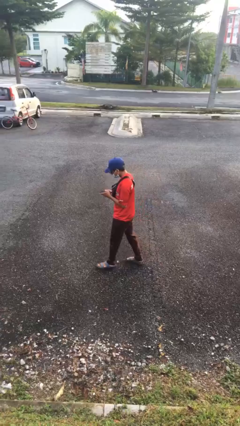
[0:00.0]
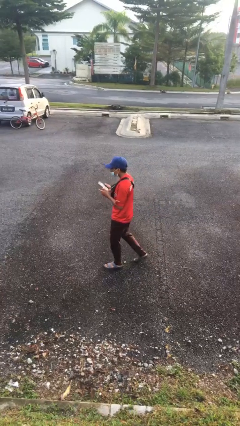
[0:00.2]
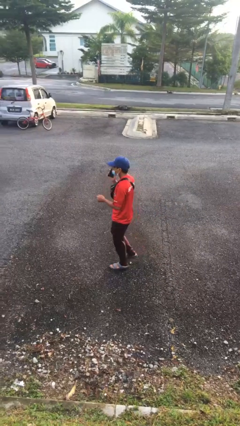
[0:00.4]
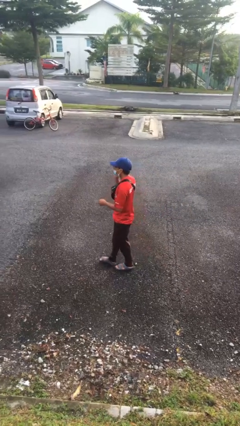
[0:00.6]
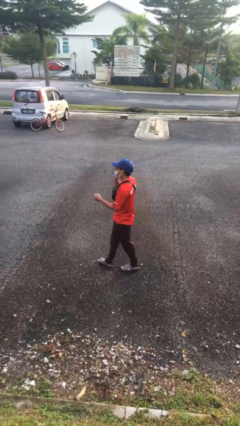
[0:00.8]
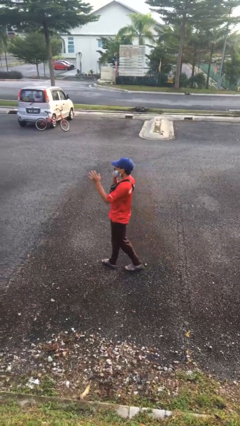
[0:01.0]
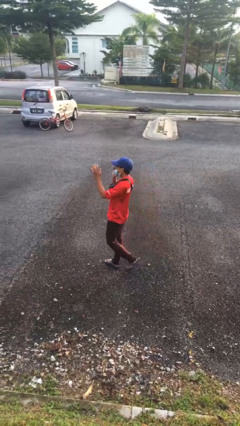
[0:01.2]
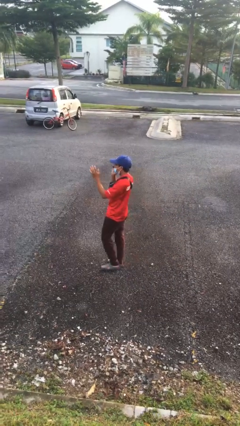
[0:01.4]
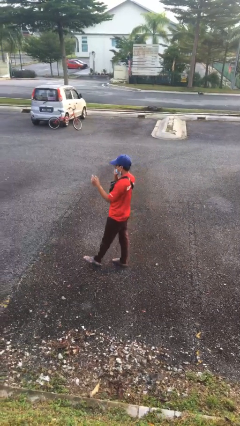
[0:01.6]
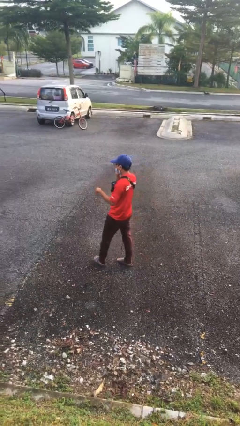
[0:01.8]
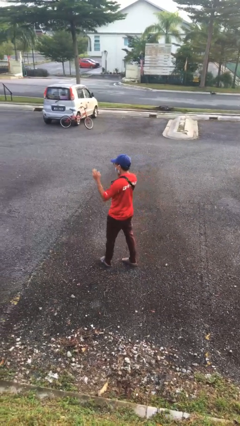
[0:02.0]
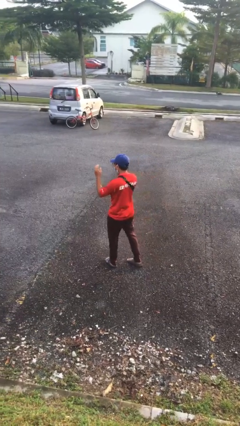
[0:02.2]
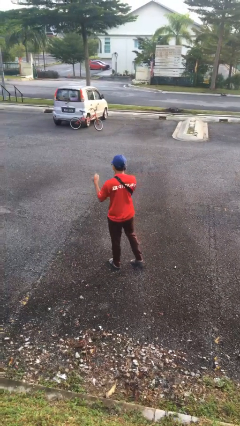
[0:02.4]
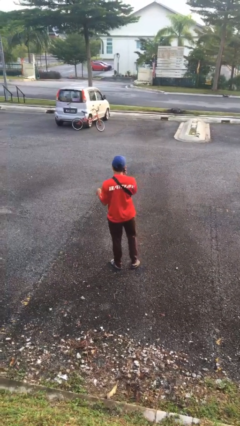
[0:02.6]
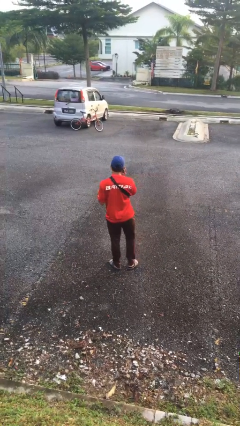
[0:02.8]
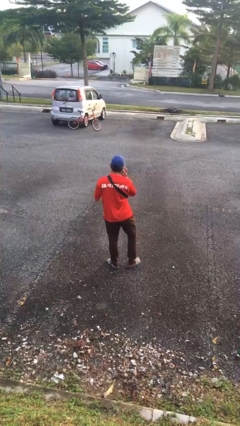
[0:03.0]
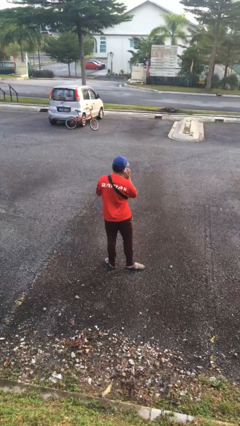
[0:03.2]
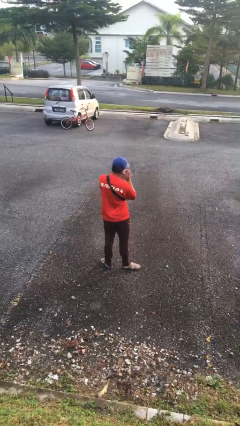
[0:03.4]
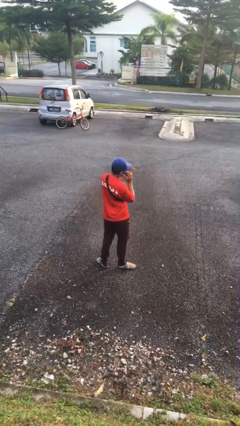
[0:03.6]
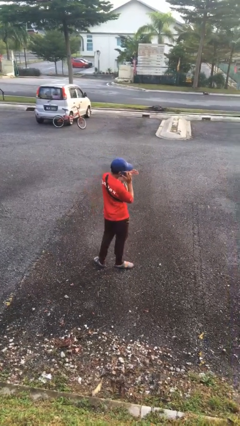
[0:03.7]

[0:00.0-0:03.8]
person talks on phone

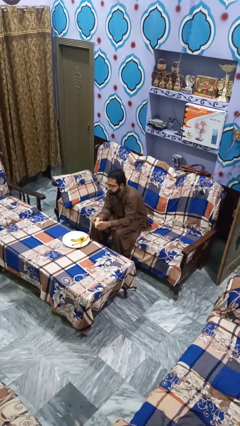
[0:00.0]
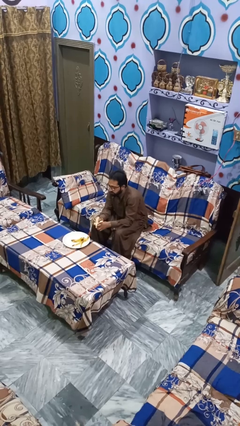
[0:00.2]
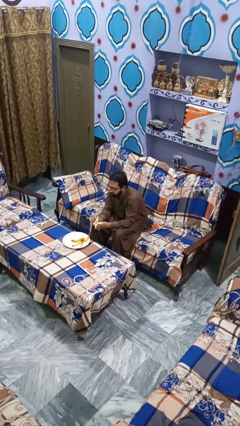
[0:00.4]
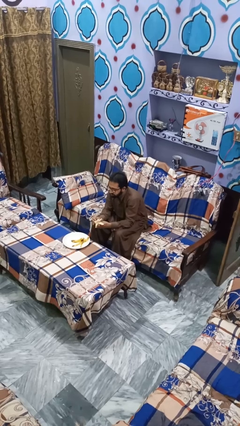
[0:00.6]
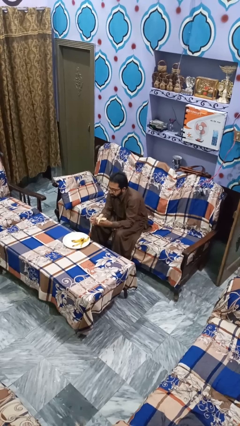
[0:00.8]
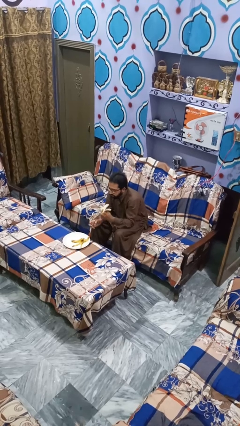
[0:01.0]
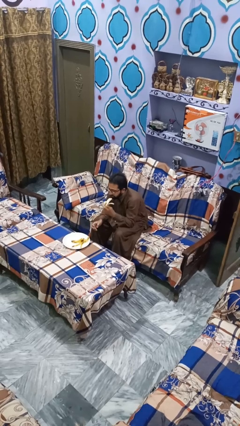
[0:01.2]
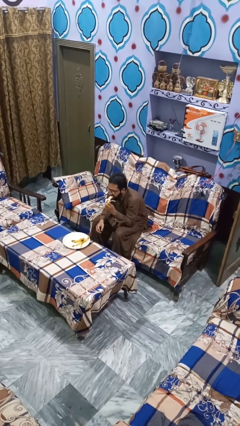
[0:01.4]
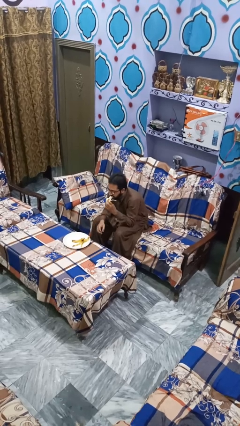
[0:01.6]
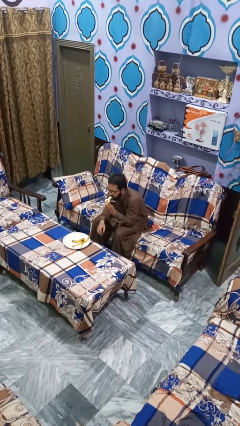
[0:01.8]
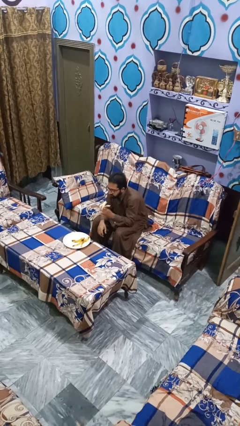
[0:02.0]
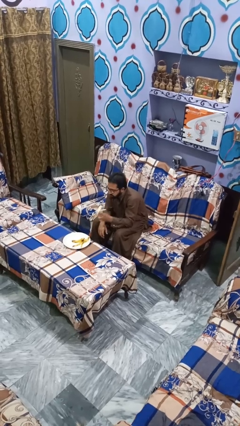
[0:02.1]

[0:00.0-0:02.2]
person eats banana

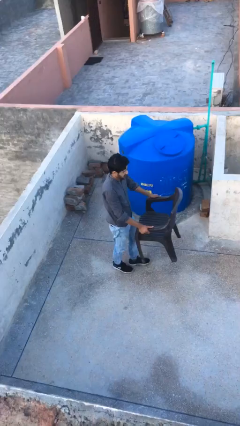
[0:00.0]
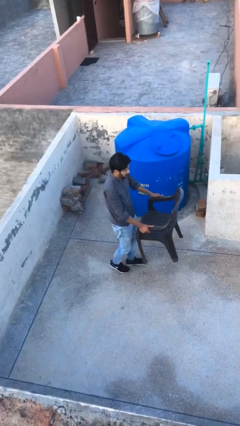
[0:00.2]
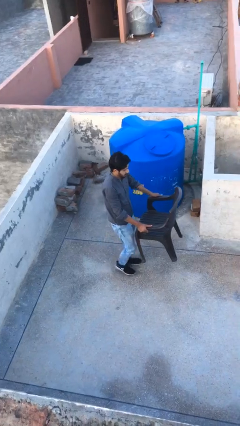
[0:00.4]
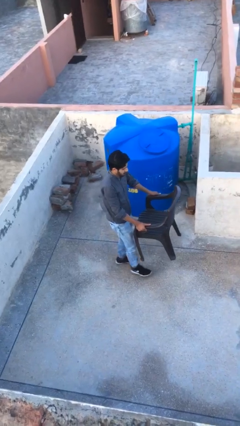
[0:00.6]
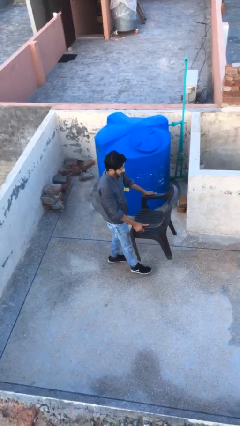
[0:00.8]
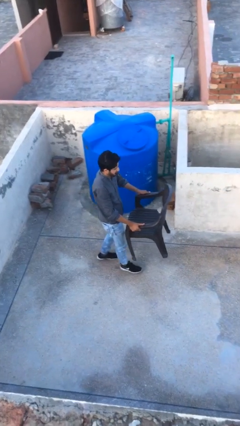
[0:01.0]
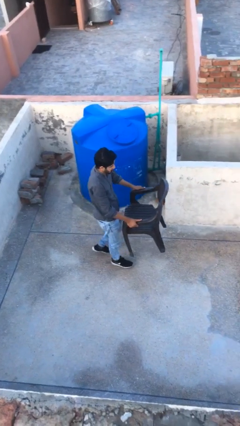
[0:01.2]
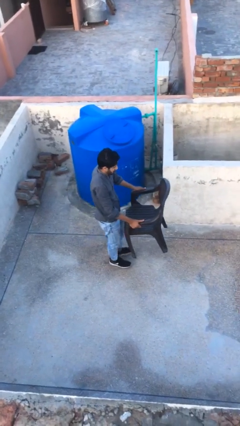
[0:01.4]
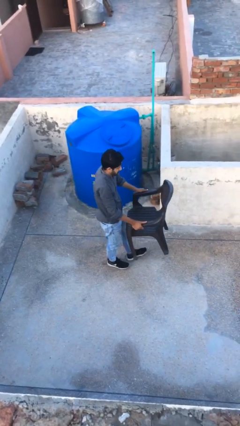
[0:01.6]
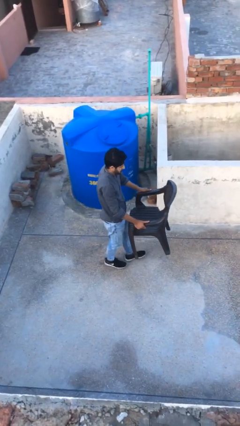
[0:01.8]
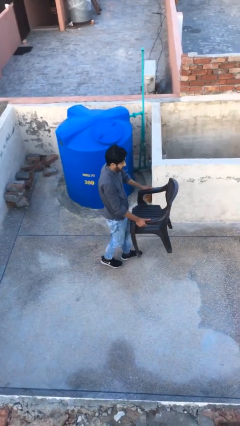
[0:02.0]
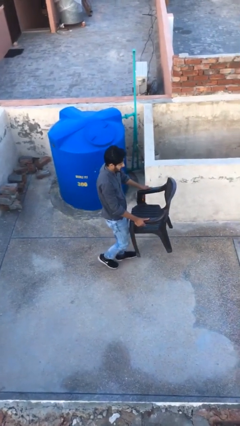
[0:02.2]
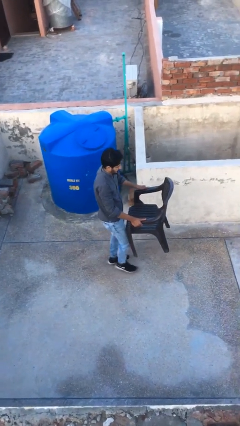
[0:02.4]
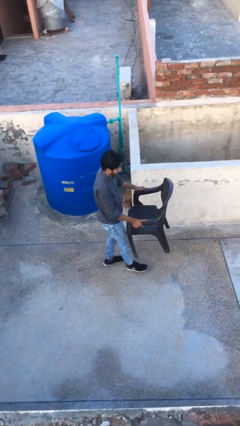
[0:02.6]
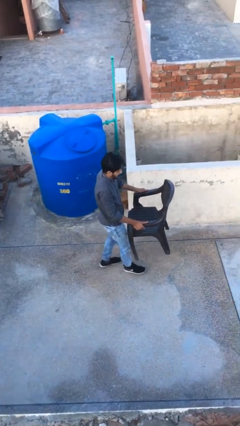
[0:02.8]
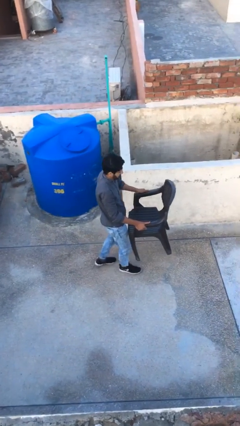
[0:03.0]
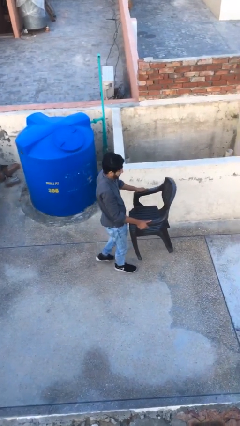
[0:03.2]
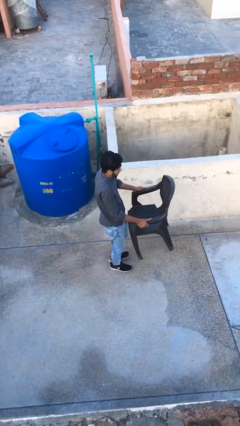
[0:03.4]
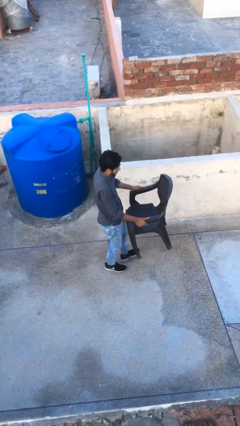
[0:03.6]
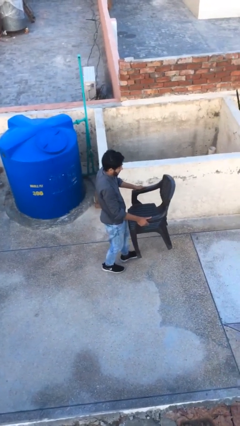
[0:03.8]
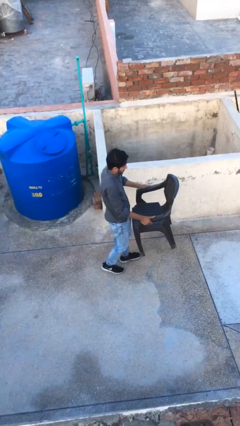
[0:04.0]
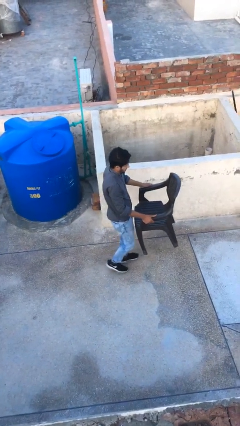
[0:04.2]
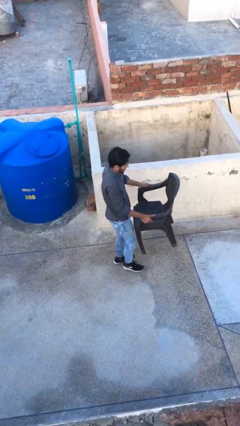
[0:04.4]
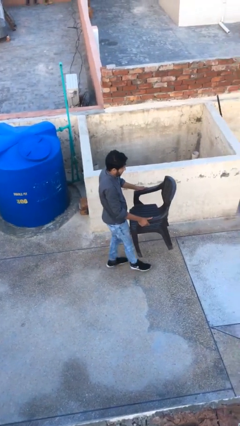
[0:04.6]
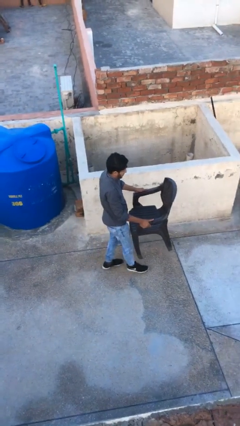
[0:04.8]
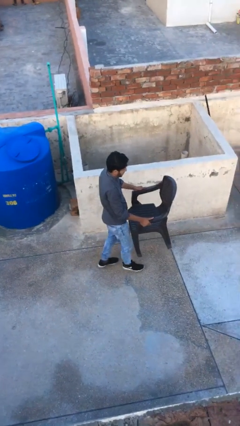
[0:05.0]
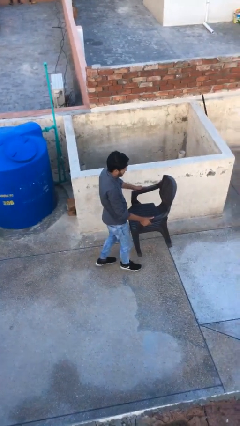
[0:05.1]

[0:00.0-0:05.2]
person carries heavy object

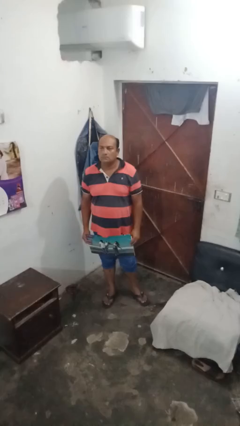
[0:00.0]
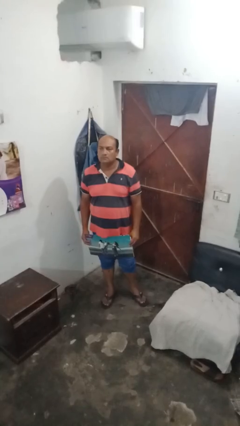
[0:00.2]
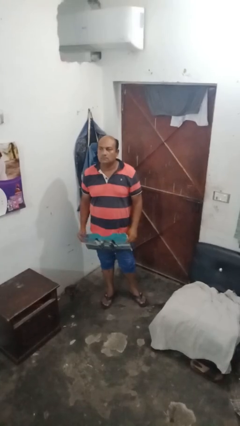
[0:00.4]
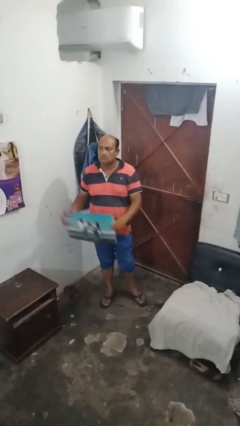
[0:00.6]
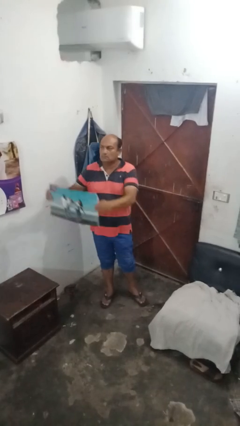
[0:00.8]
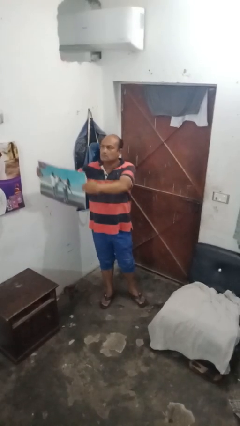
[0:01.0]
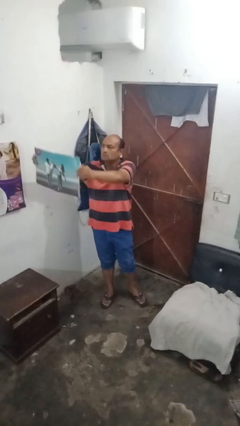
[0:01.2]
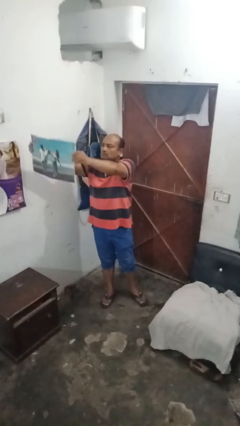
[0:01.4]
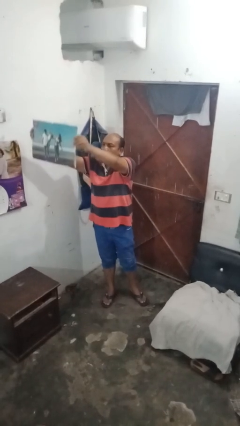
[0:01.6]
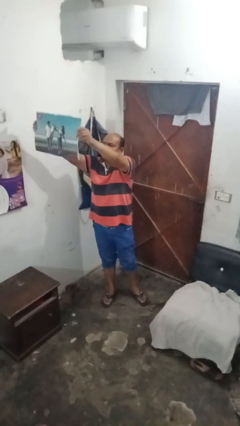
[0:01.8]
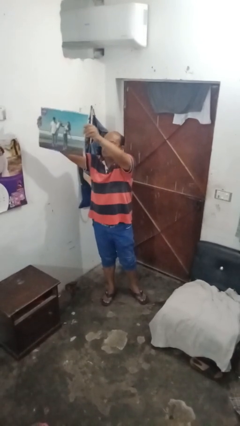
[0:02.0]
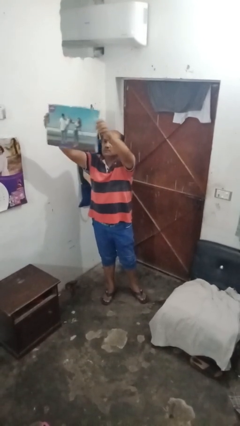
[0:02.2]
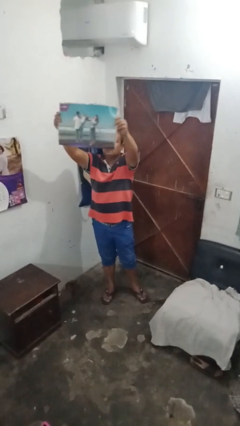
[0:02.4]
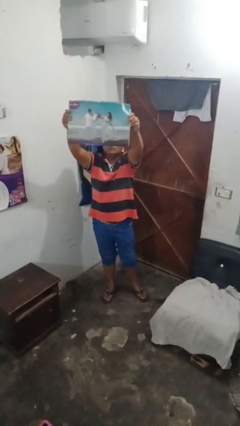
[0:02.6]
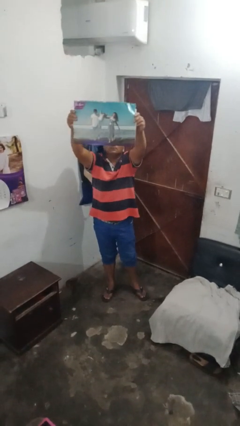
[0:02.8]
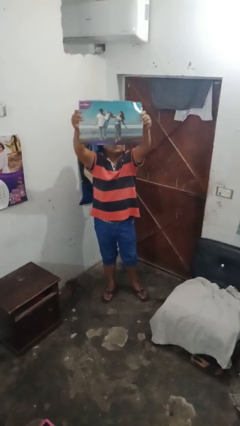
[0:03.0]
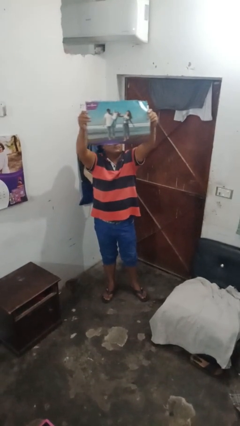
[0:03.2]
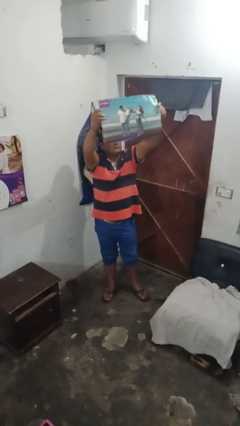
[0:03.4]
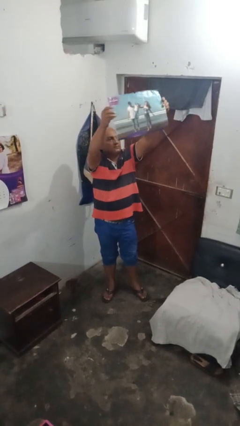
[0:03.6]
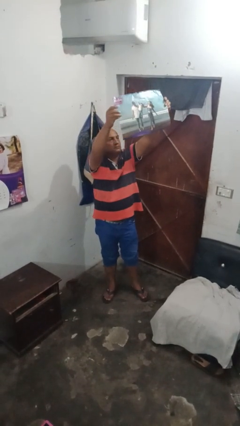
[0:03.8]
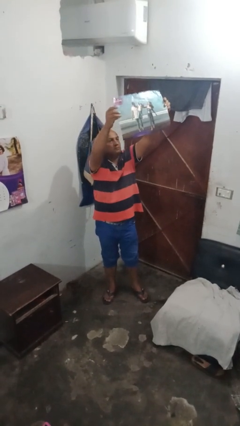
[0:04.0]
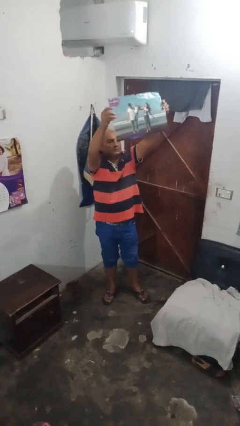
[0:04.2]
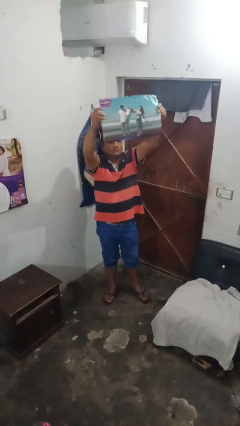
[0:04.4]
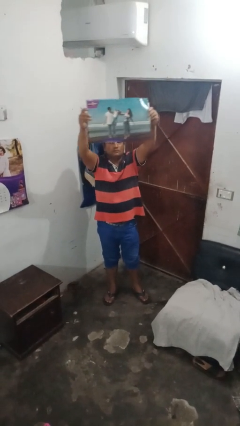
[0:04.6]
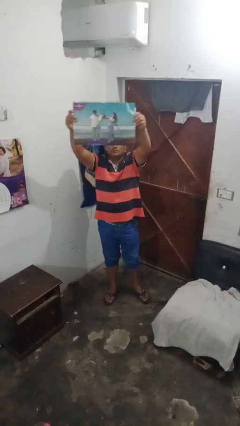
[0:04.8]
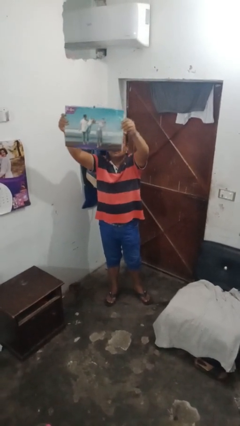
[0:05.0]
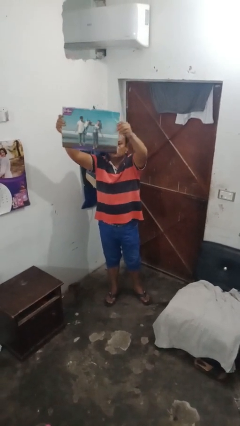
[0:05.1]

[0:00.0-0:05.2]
person holds object above head

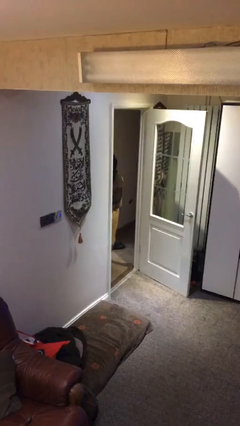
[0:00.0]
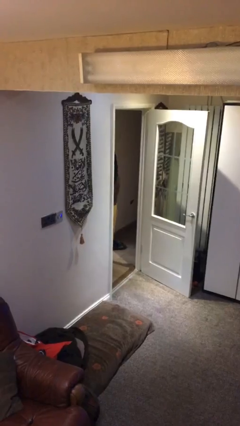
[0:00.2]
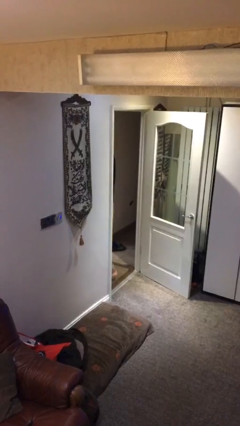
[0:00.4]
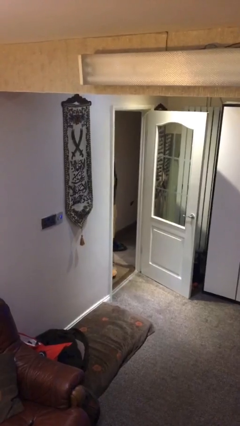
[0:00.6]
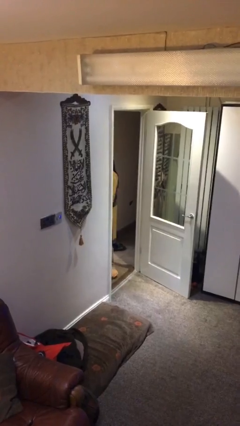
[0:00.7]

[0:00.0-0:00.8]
person enters scene through structure

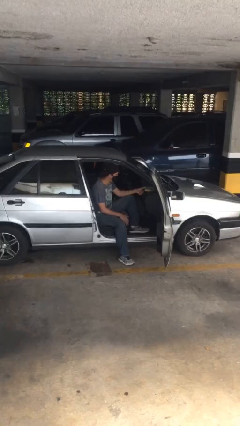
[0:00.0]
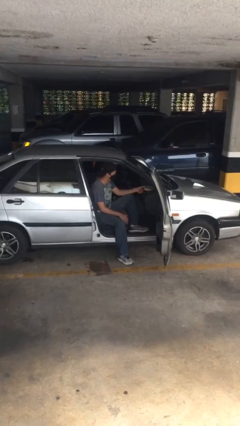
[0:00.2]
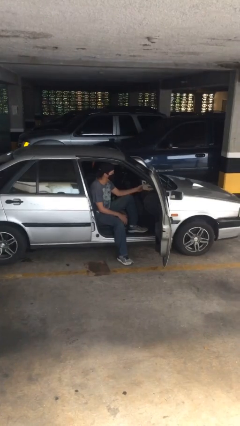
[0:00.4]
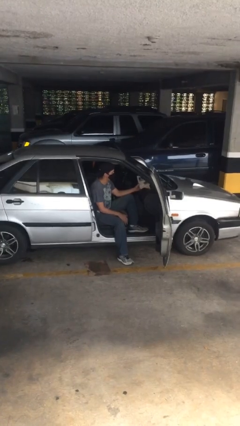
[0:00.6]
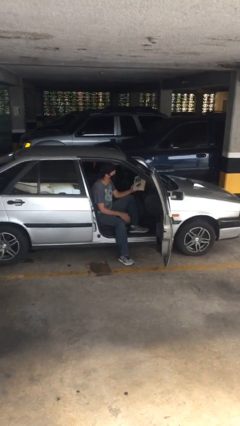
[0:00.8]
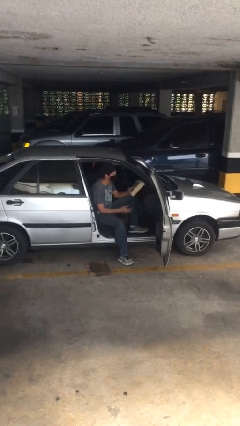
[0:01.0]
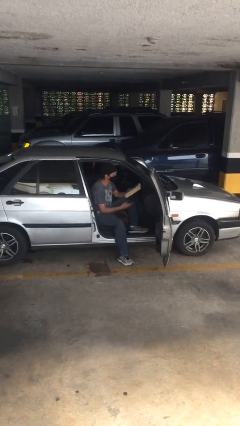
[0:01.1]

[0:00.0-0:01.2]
person picks up object from table
